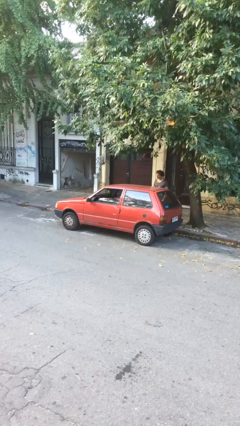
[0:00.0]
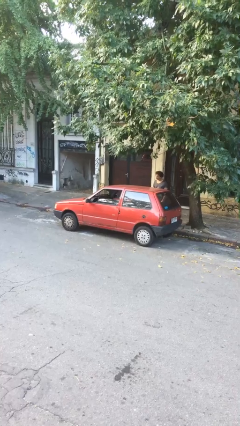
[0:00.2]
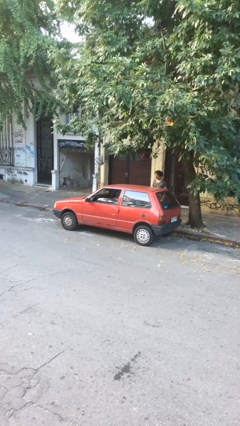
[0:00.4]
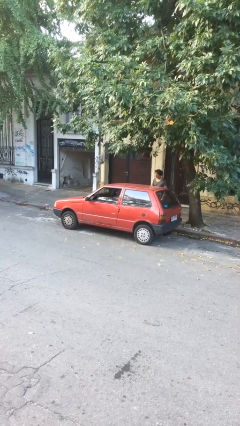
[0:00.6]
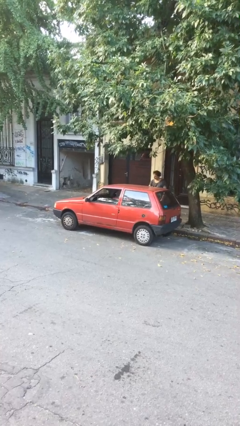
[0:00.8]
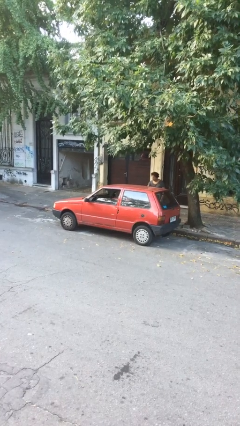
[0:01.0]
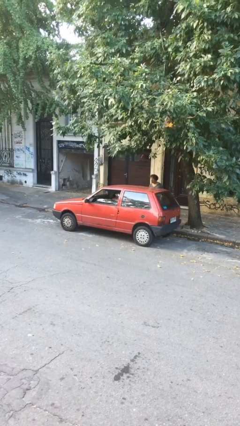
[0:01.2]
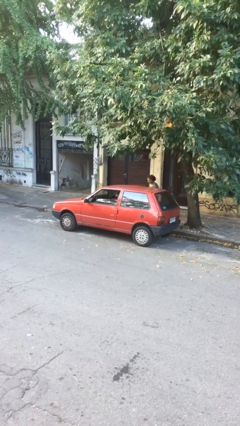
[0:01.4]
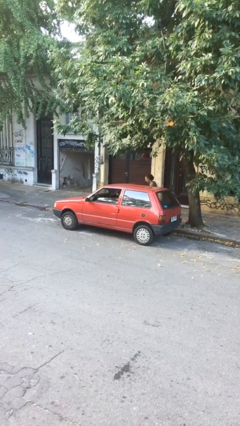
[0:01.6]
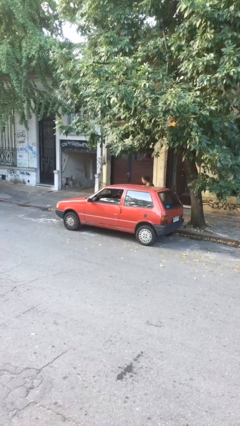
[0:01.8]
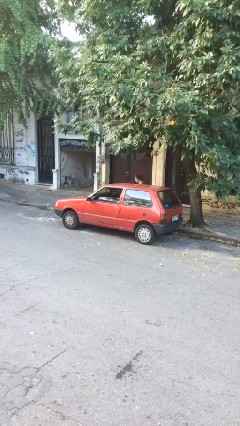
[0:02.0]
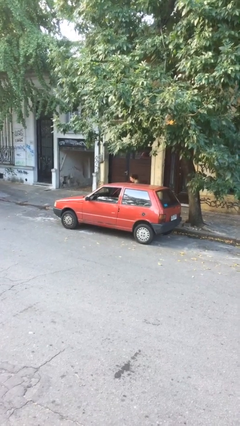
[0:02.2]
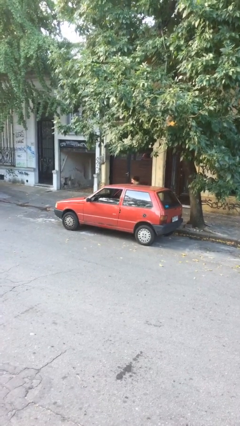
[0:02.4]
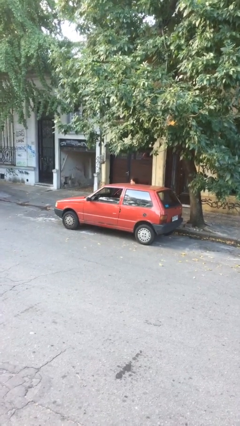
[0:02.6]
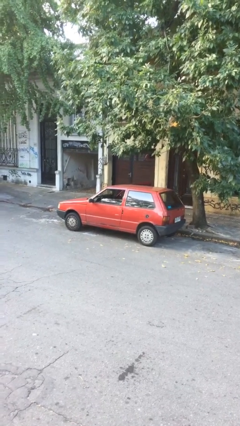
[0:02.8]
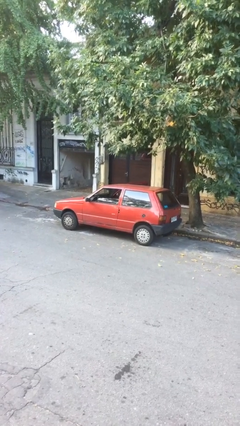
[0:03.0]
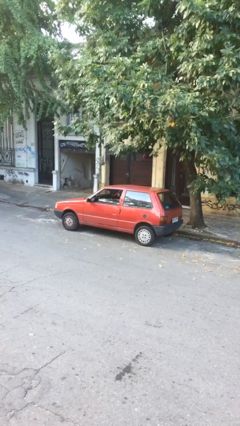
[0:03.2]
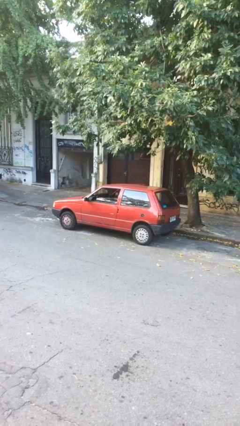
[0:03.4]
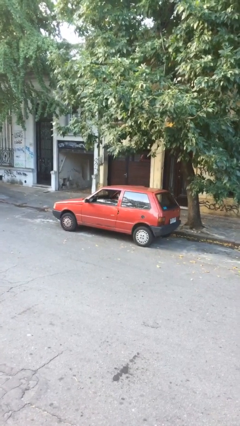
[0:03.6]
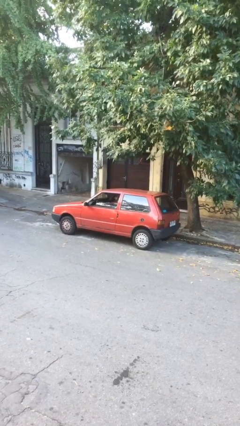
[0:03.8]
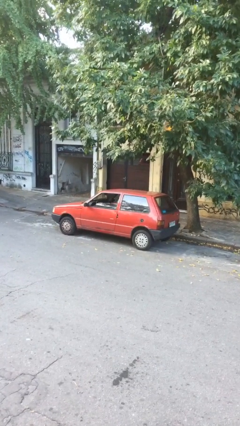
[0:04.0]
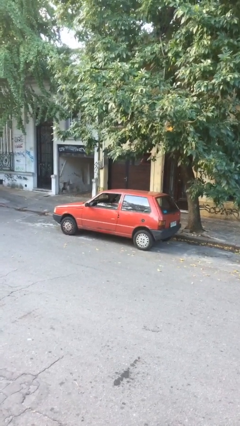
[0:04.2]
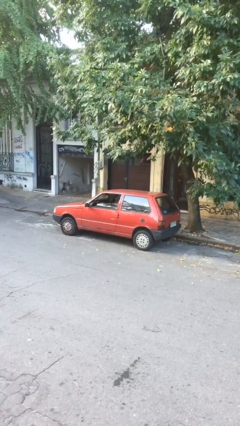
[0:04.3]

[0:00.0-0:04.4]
car picks up person

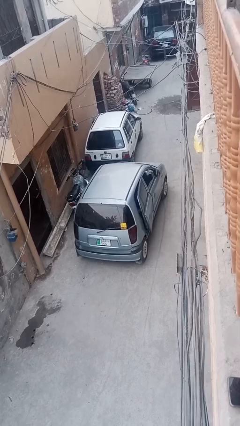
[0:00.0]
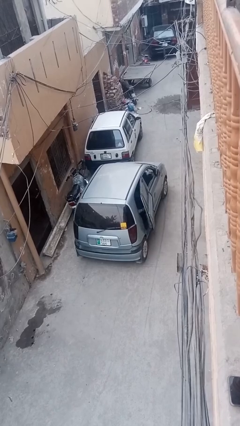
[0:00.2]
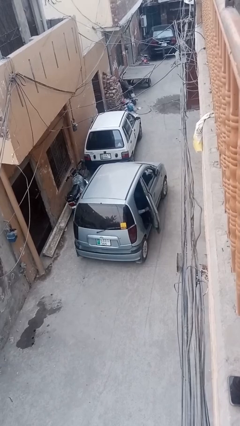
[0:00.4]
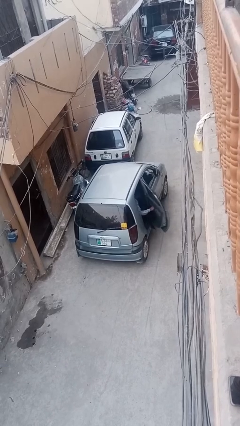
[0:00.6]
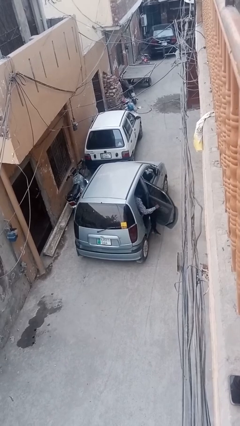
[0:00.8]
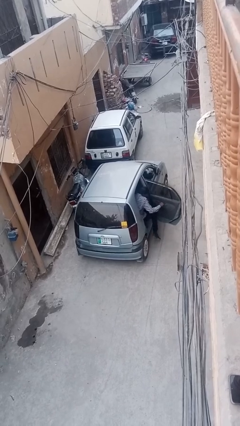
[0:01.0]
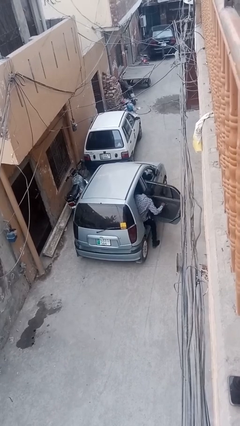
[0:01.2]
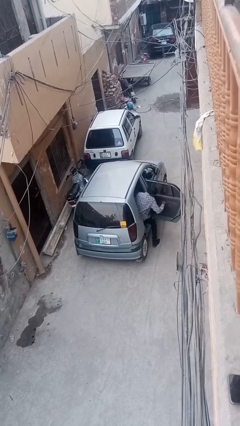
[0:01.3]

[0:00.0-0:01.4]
car drops off person

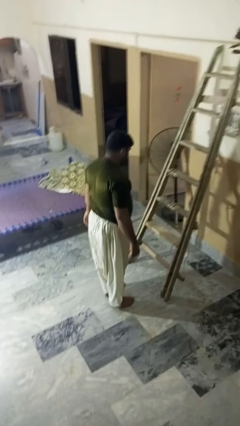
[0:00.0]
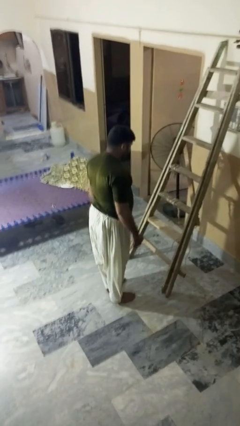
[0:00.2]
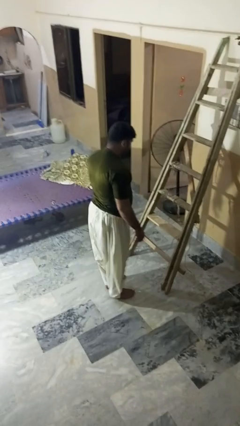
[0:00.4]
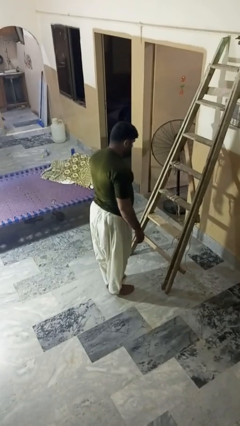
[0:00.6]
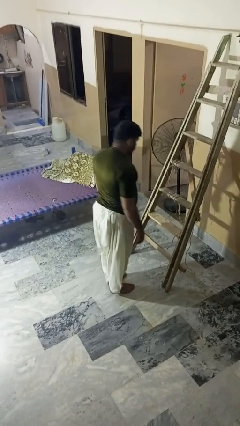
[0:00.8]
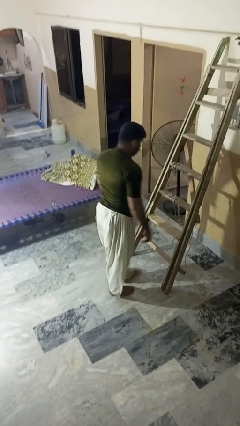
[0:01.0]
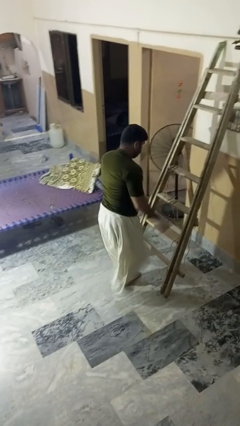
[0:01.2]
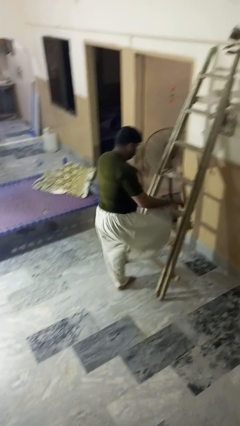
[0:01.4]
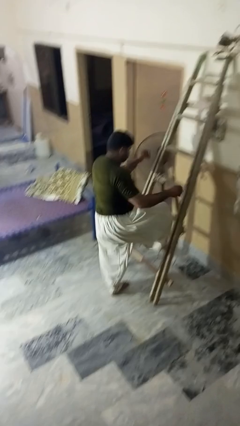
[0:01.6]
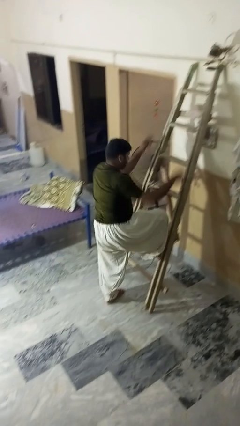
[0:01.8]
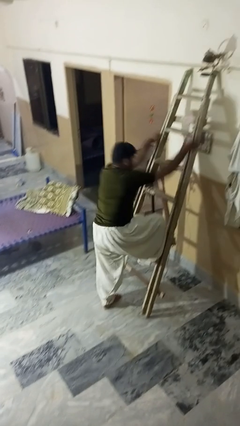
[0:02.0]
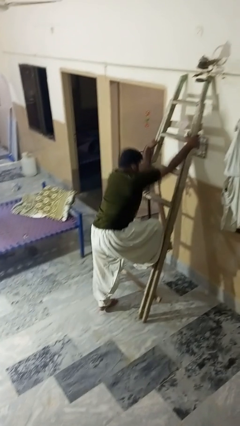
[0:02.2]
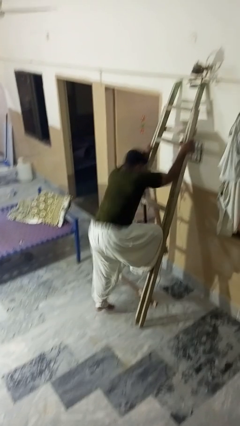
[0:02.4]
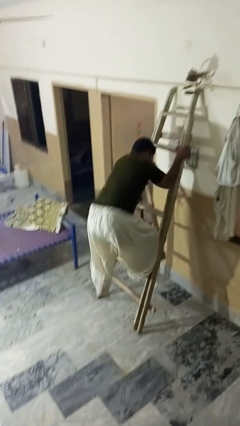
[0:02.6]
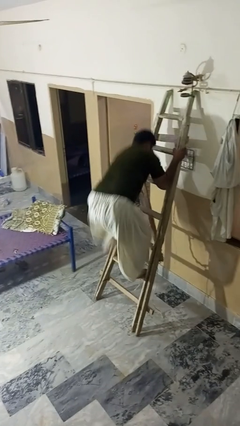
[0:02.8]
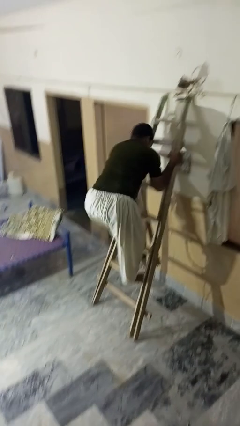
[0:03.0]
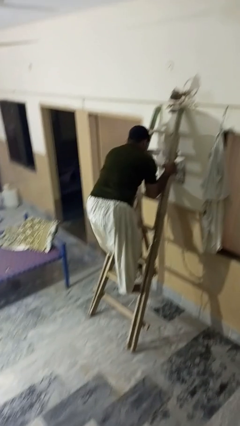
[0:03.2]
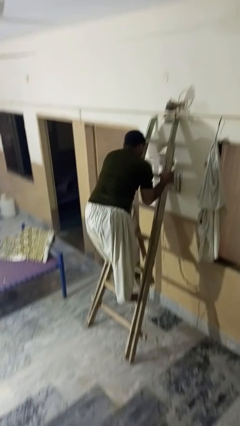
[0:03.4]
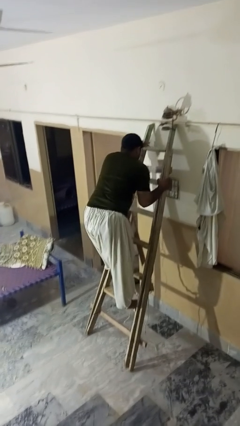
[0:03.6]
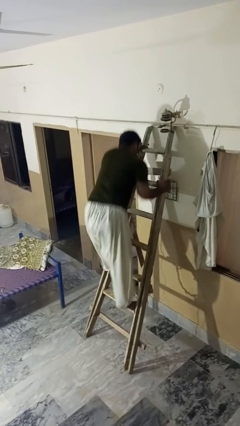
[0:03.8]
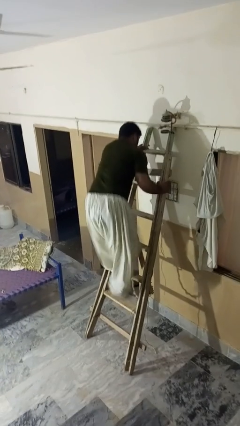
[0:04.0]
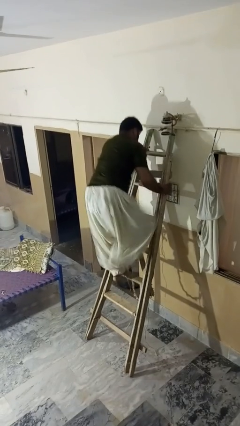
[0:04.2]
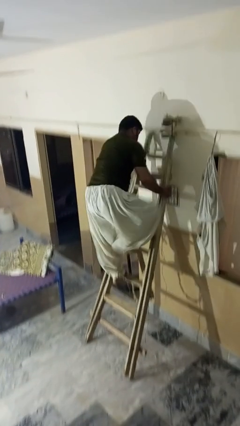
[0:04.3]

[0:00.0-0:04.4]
person climbs up ladder

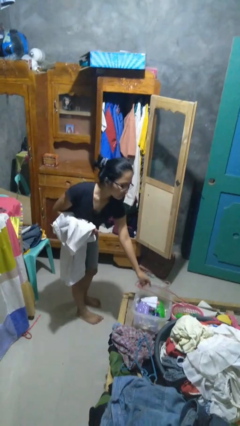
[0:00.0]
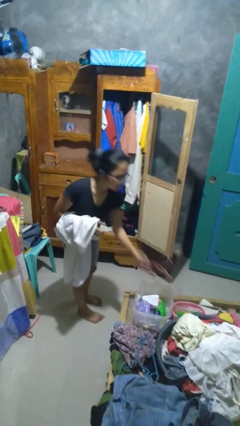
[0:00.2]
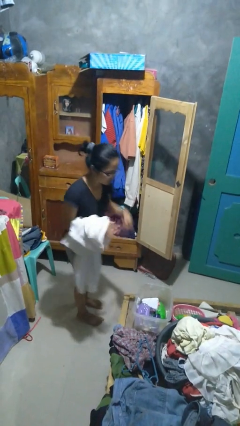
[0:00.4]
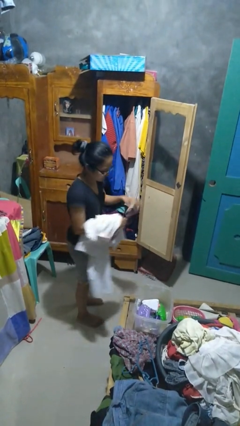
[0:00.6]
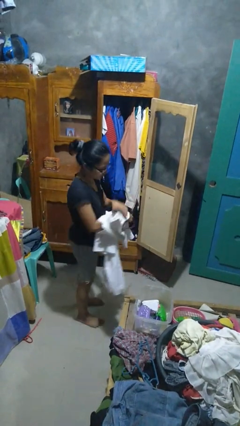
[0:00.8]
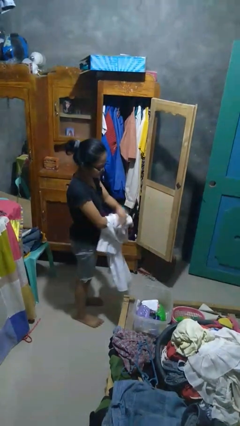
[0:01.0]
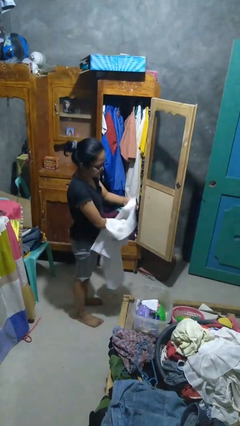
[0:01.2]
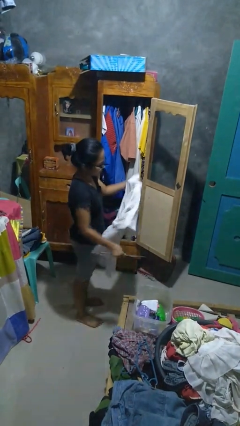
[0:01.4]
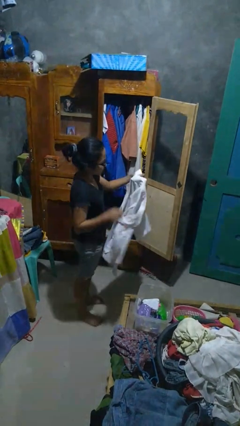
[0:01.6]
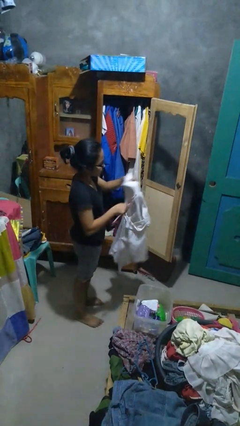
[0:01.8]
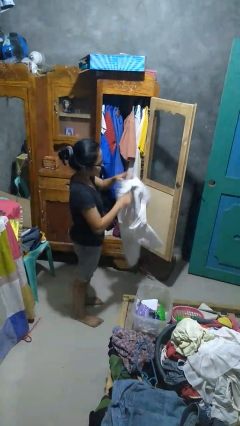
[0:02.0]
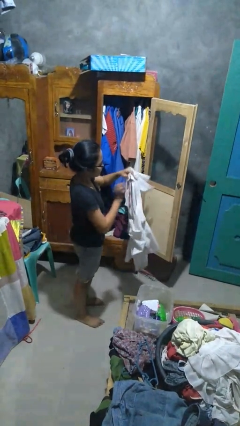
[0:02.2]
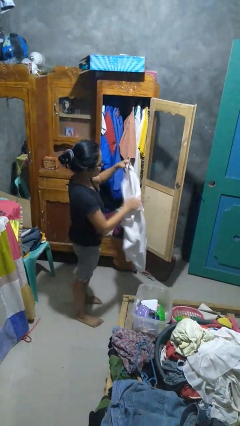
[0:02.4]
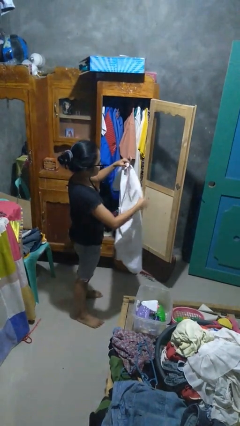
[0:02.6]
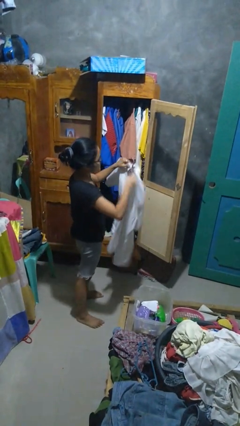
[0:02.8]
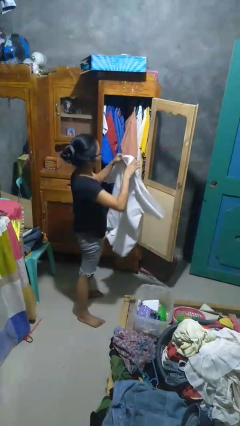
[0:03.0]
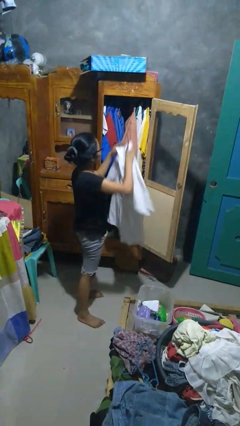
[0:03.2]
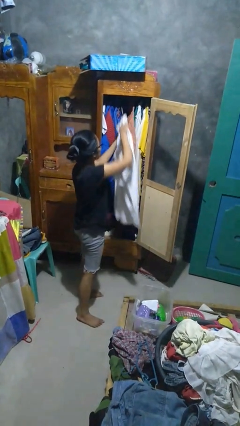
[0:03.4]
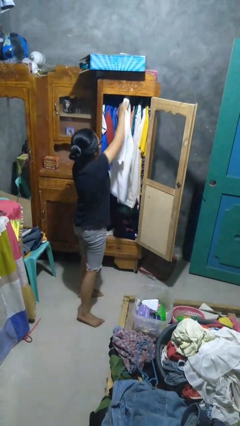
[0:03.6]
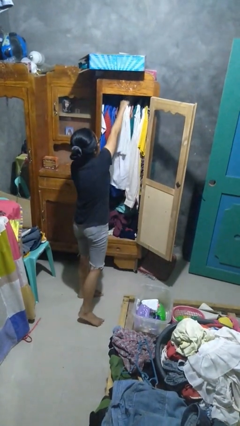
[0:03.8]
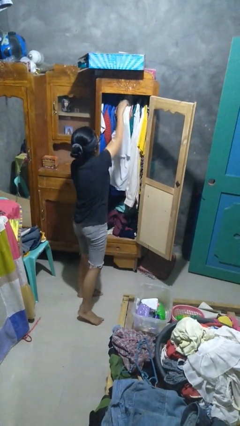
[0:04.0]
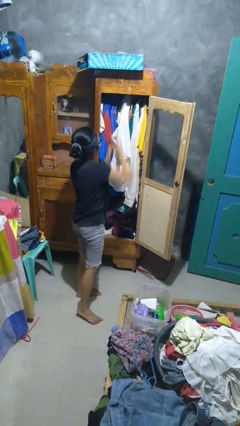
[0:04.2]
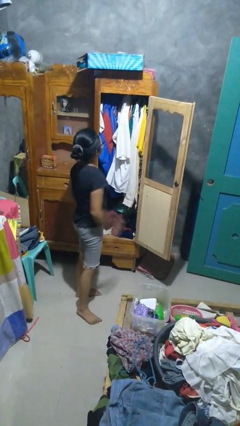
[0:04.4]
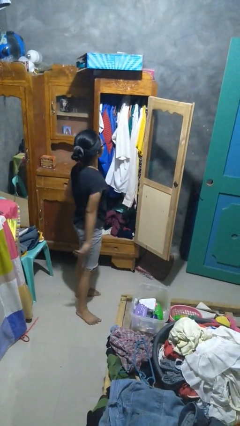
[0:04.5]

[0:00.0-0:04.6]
person puts clothes into closet

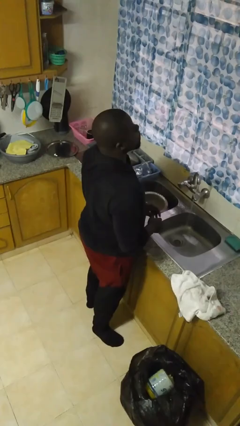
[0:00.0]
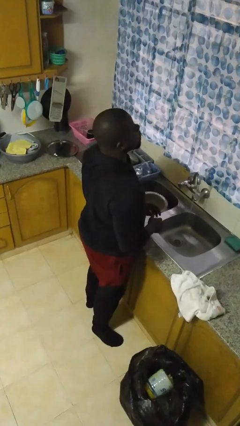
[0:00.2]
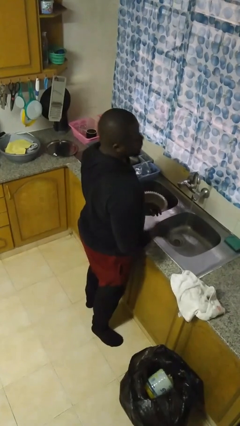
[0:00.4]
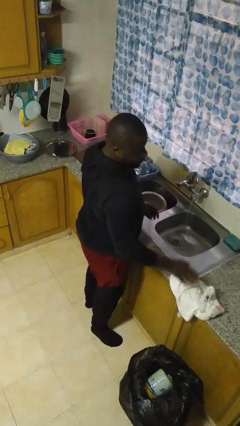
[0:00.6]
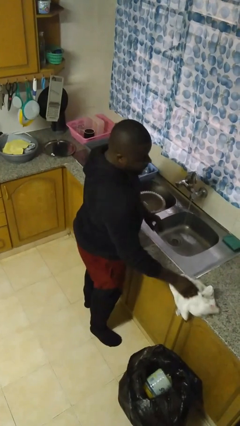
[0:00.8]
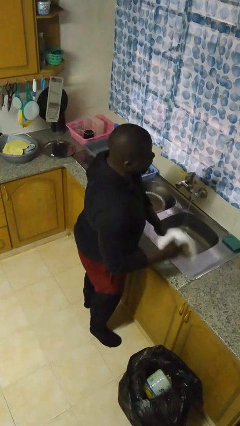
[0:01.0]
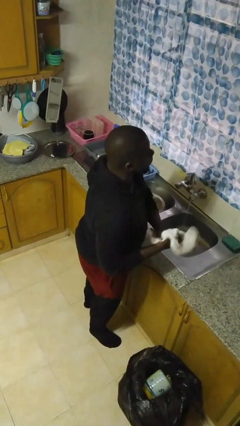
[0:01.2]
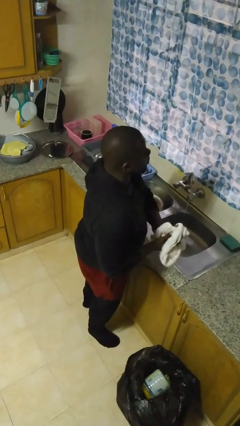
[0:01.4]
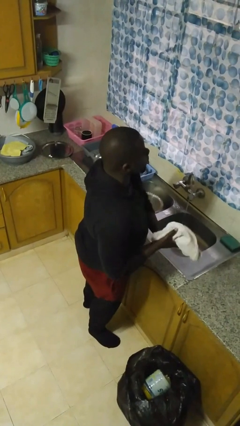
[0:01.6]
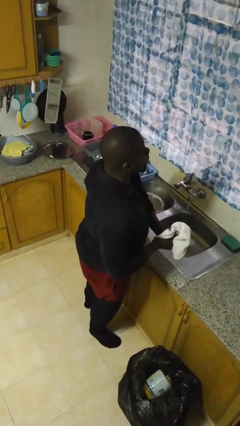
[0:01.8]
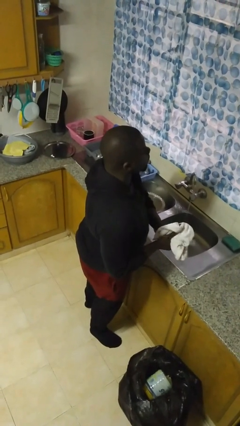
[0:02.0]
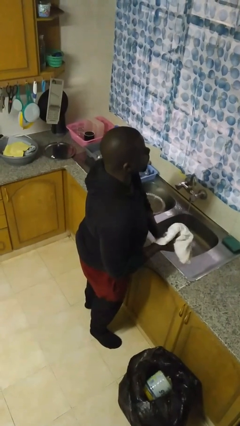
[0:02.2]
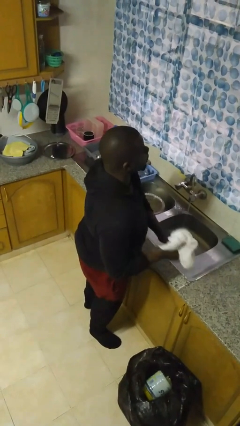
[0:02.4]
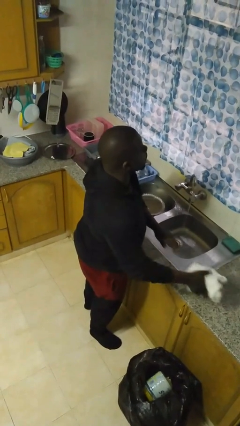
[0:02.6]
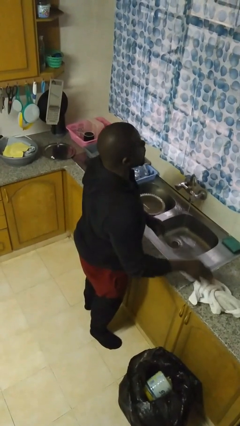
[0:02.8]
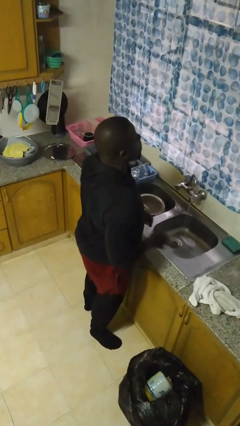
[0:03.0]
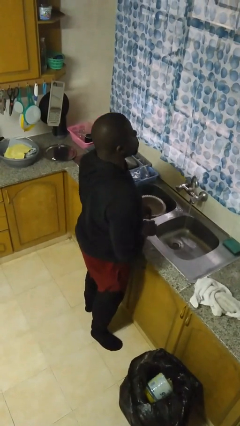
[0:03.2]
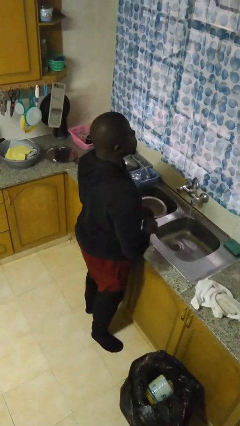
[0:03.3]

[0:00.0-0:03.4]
person dries hands with towel
